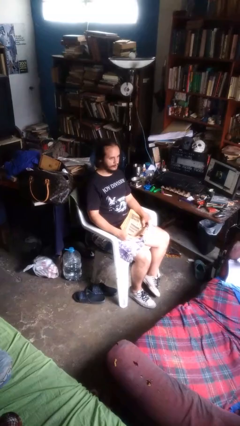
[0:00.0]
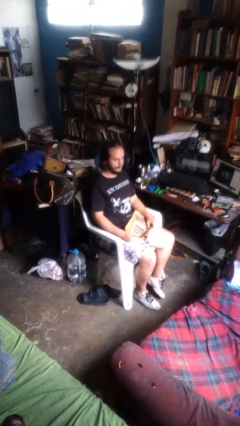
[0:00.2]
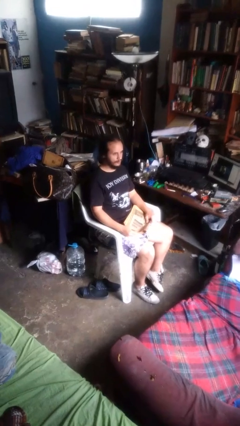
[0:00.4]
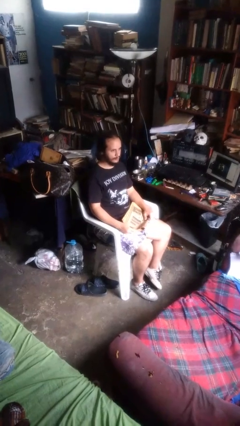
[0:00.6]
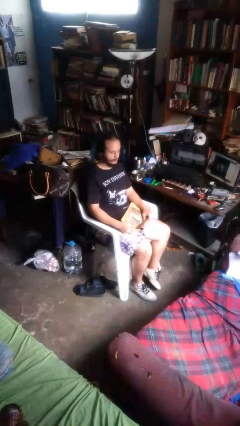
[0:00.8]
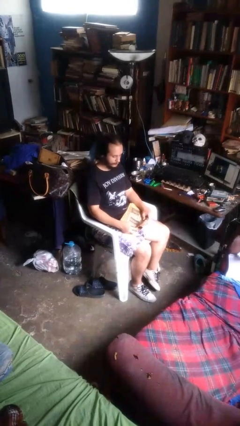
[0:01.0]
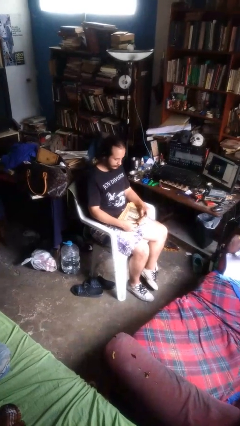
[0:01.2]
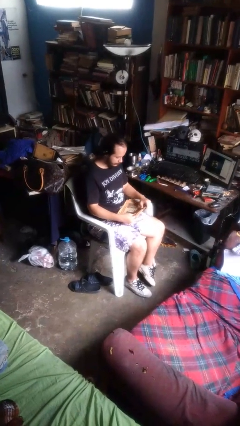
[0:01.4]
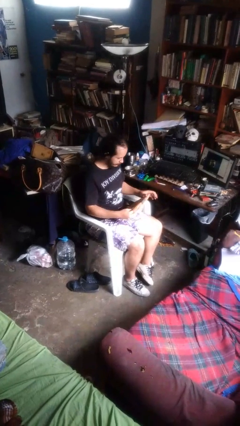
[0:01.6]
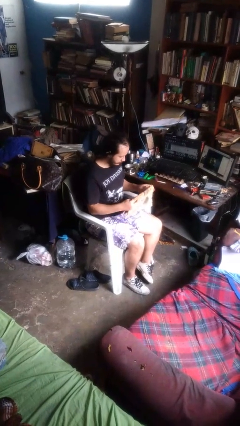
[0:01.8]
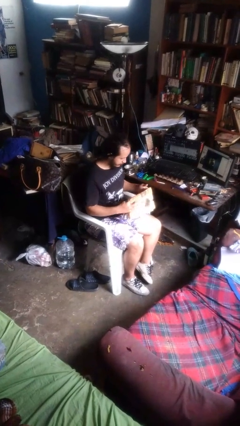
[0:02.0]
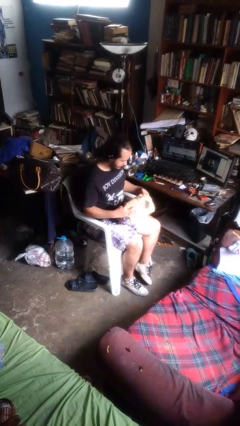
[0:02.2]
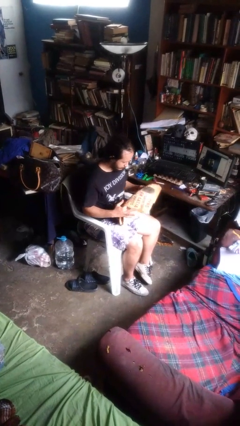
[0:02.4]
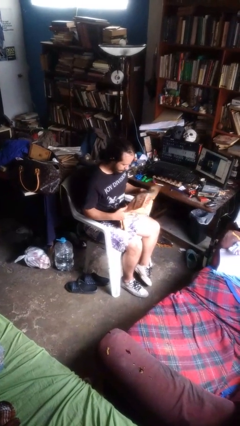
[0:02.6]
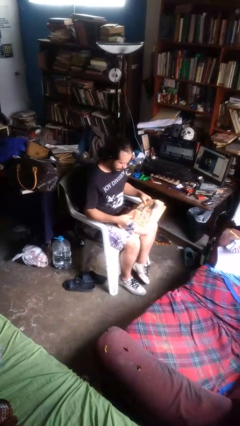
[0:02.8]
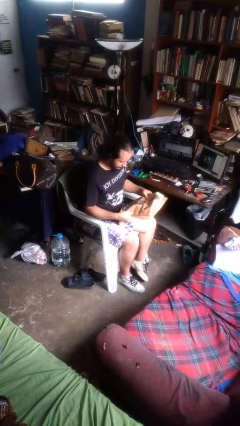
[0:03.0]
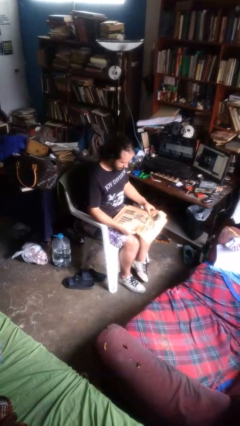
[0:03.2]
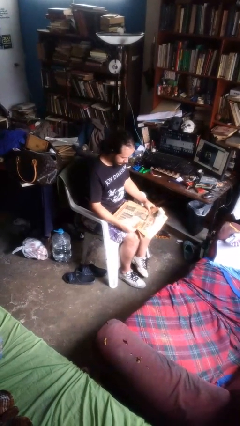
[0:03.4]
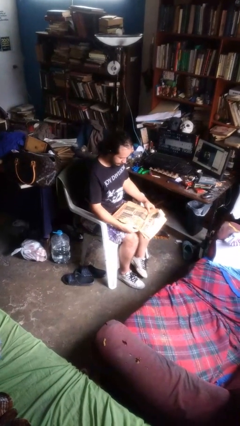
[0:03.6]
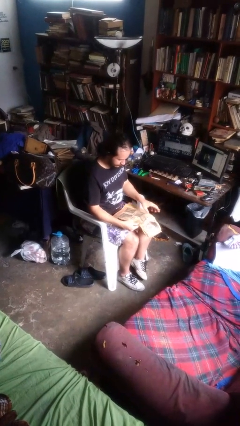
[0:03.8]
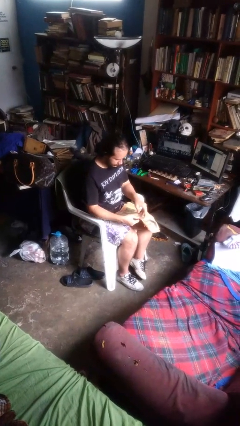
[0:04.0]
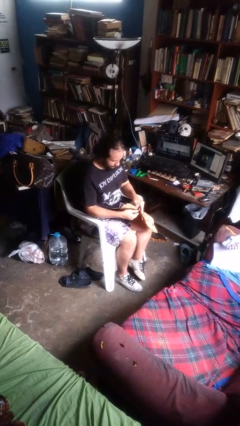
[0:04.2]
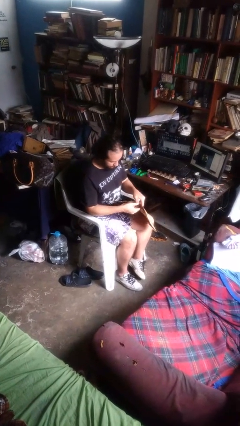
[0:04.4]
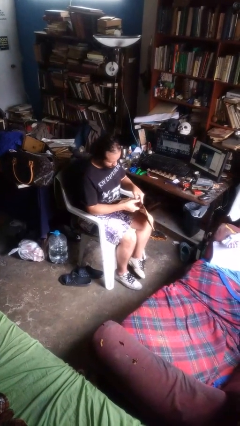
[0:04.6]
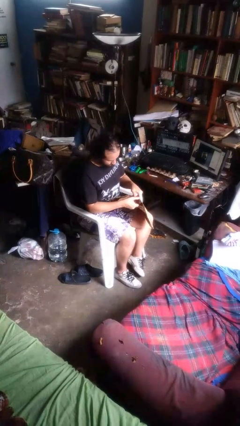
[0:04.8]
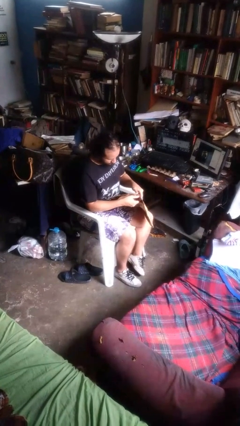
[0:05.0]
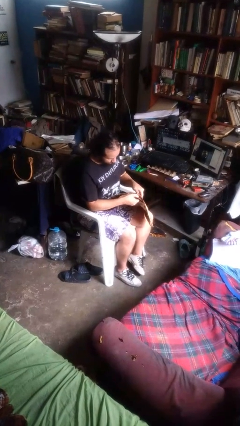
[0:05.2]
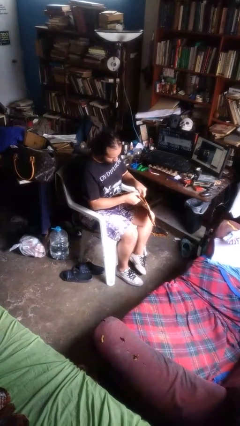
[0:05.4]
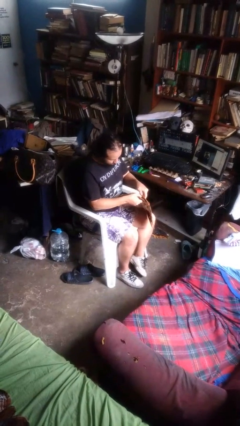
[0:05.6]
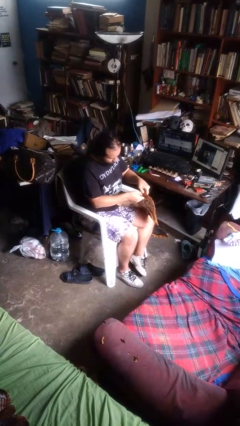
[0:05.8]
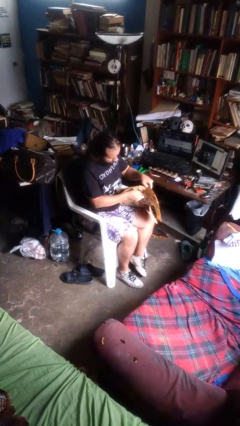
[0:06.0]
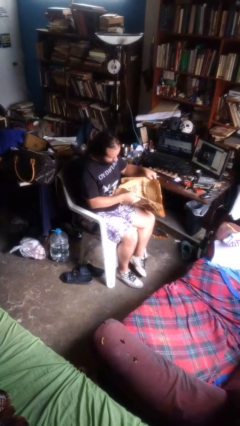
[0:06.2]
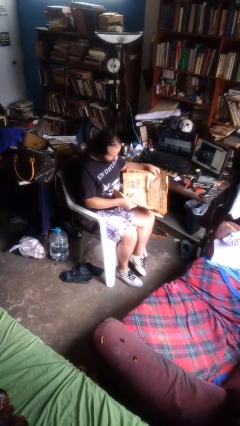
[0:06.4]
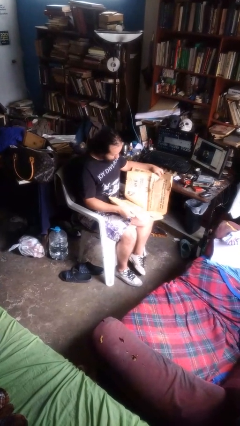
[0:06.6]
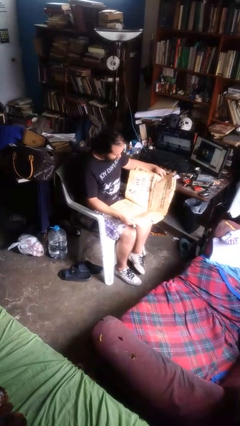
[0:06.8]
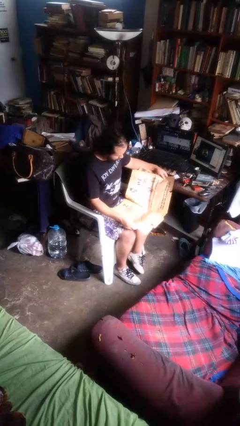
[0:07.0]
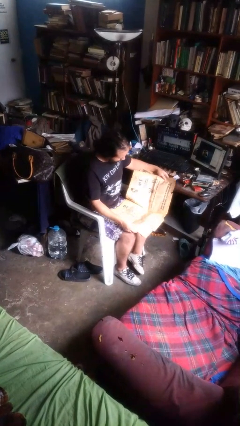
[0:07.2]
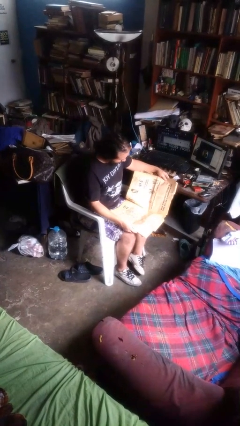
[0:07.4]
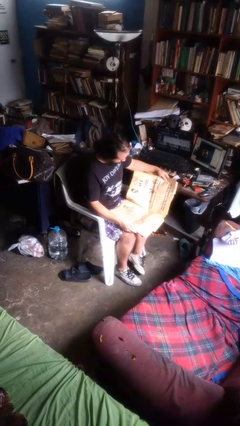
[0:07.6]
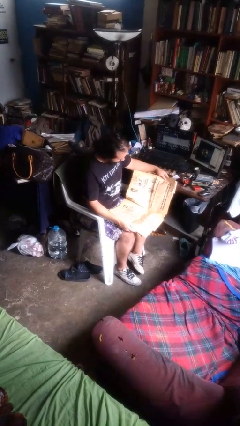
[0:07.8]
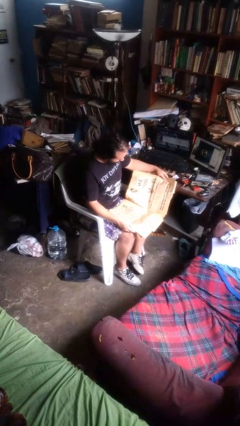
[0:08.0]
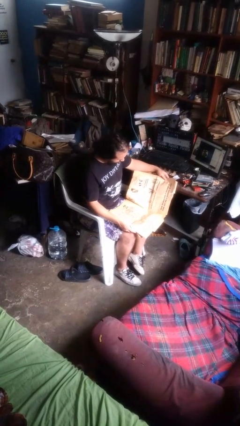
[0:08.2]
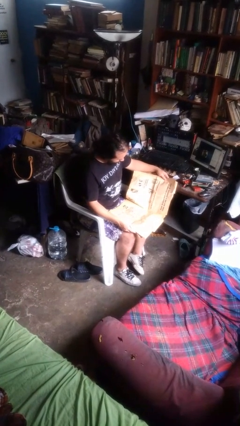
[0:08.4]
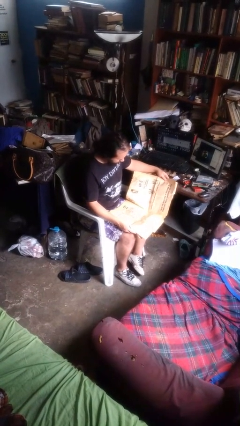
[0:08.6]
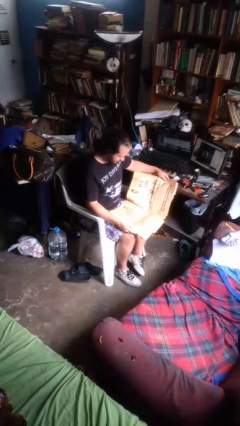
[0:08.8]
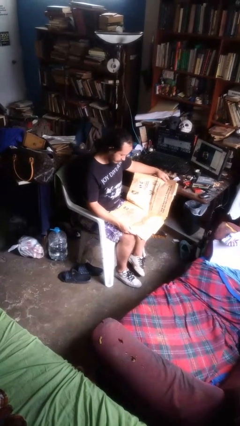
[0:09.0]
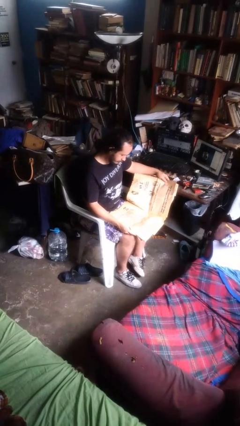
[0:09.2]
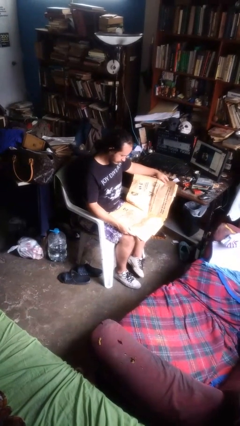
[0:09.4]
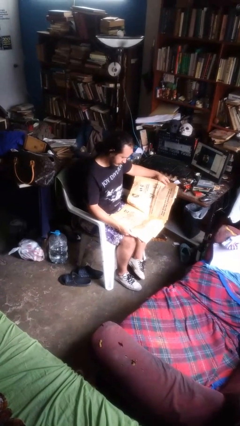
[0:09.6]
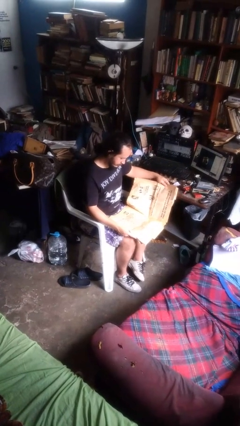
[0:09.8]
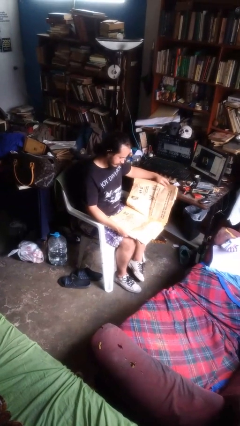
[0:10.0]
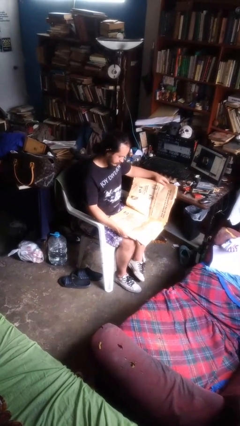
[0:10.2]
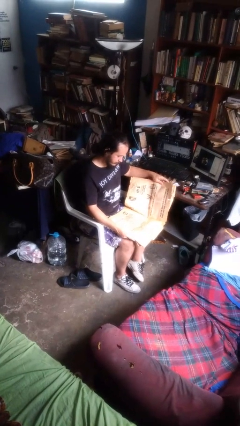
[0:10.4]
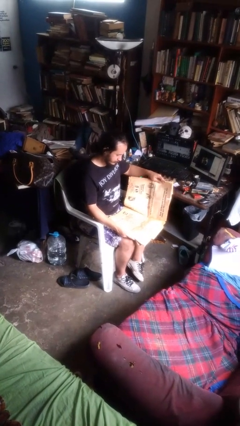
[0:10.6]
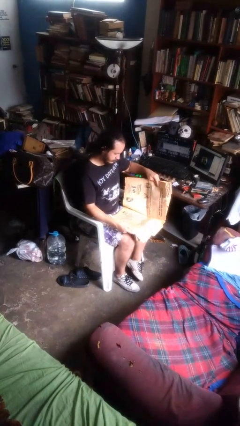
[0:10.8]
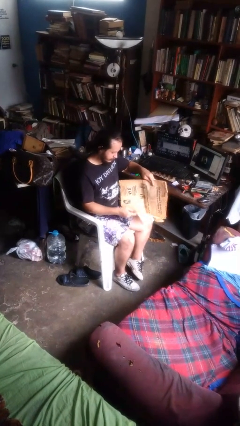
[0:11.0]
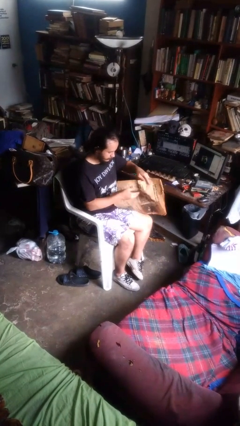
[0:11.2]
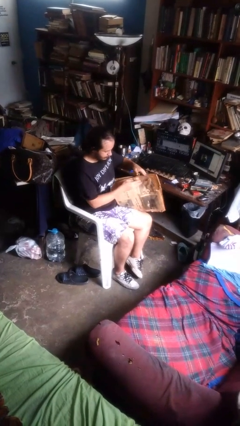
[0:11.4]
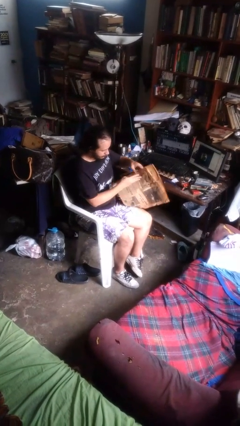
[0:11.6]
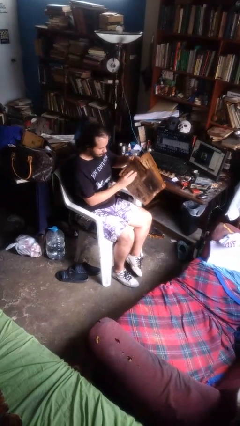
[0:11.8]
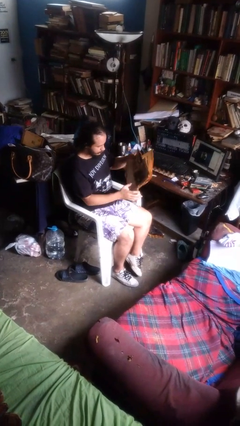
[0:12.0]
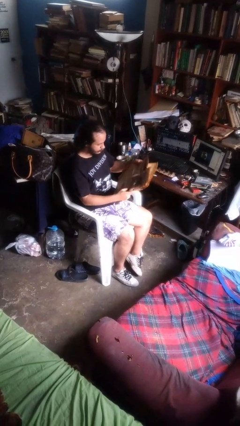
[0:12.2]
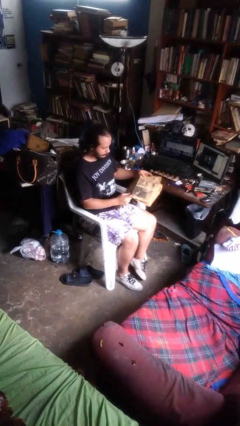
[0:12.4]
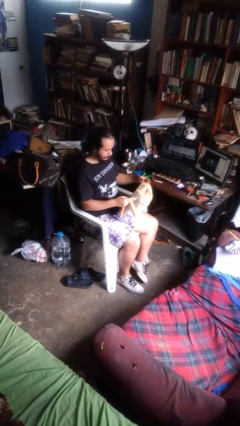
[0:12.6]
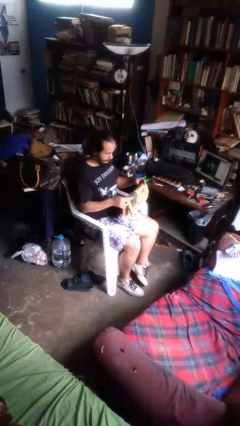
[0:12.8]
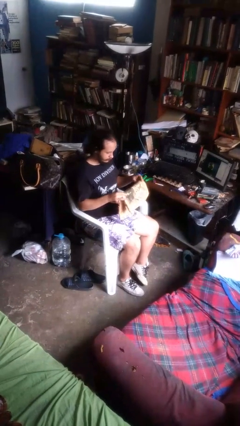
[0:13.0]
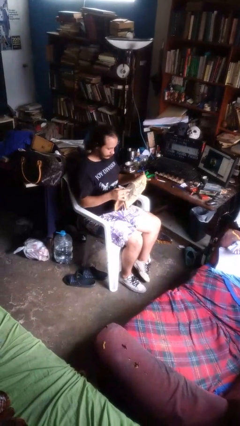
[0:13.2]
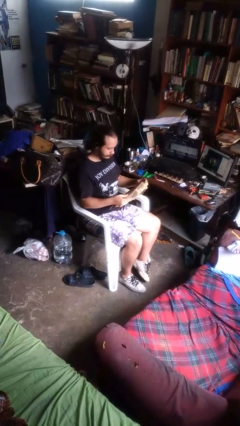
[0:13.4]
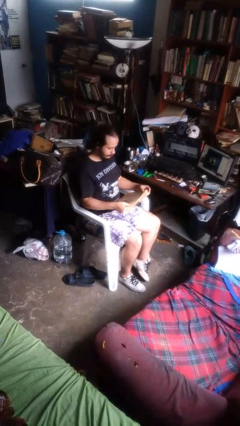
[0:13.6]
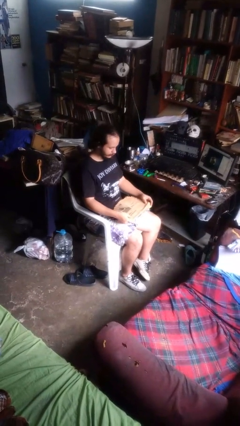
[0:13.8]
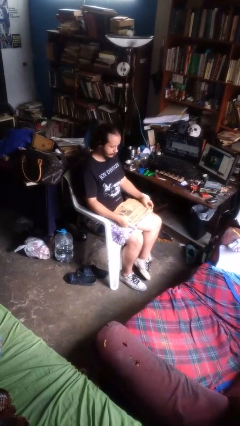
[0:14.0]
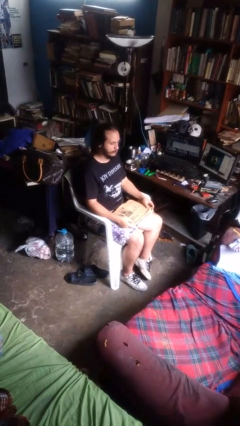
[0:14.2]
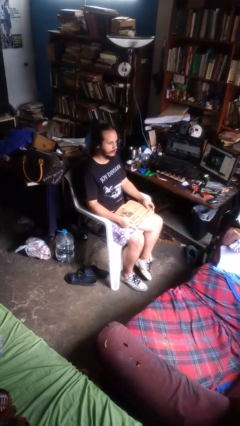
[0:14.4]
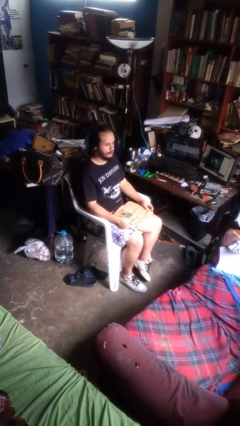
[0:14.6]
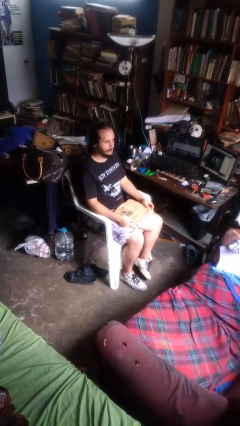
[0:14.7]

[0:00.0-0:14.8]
person reads newspaper

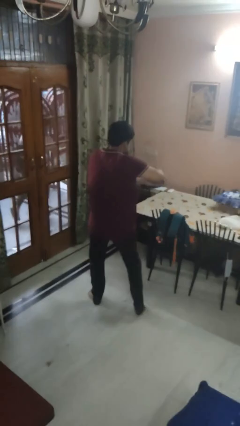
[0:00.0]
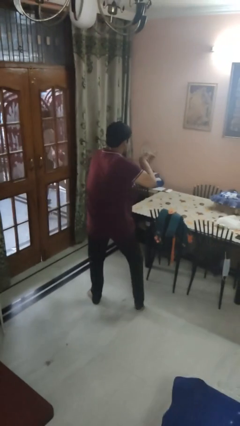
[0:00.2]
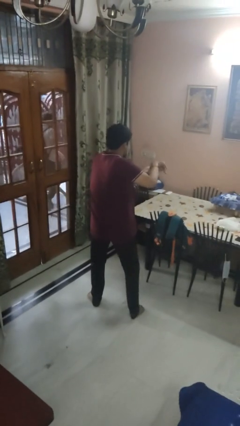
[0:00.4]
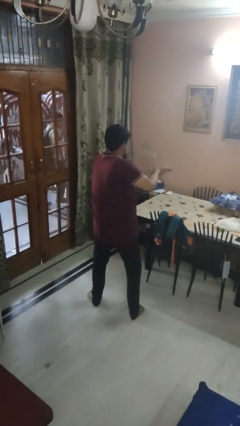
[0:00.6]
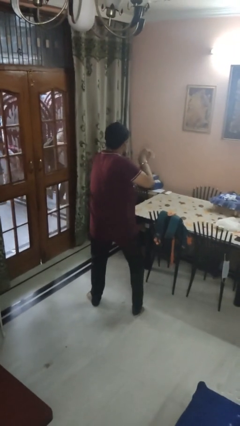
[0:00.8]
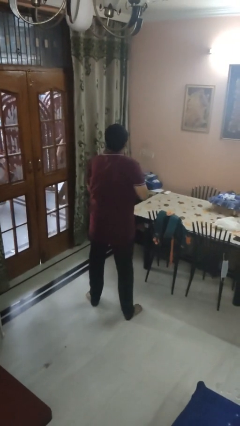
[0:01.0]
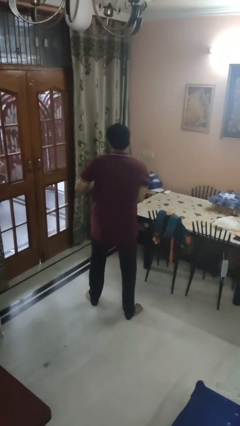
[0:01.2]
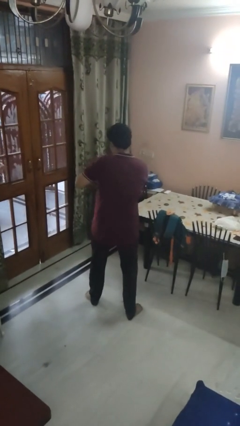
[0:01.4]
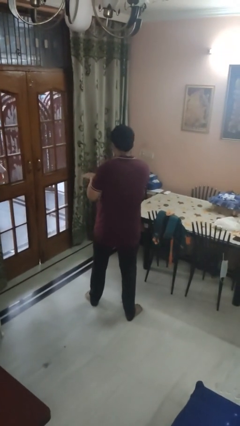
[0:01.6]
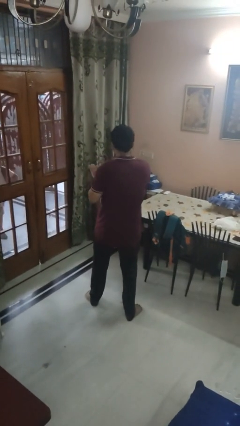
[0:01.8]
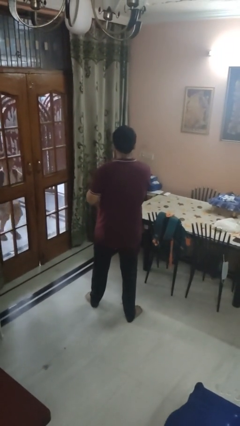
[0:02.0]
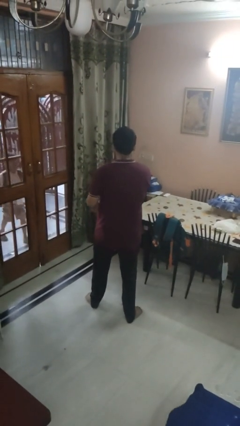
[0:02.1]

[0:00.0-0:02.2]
person dances in place

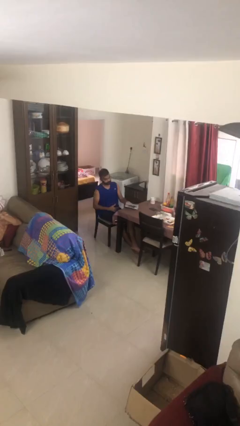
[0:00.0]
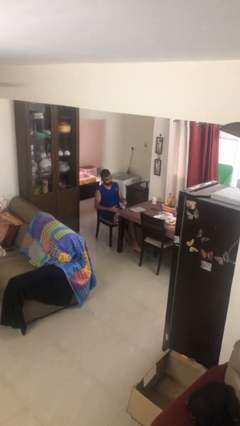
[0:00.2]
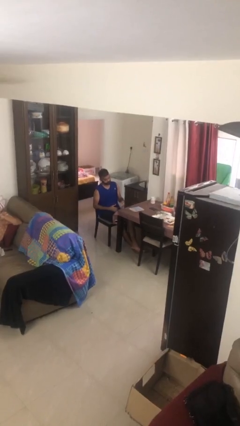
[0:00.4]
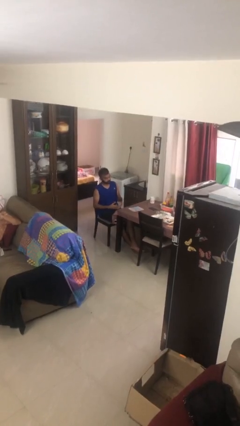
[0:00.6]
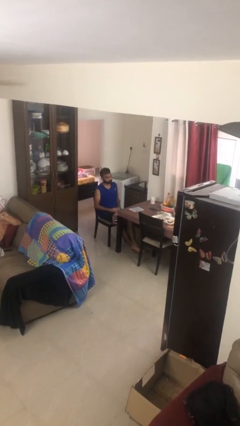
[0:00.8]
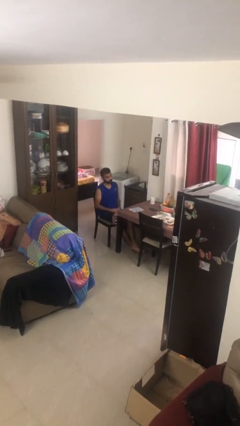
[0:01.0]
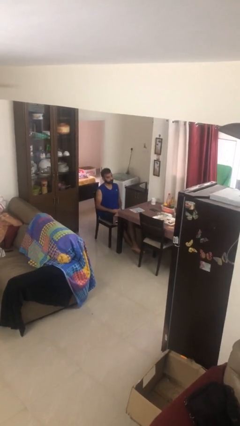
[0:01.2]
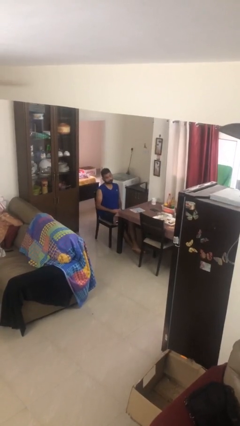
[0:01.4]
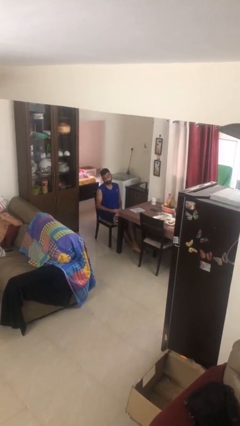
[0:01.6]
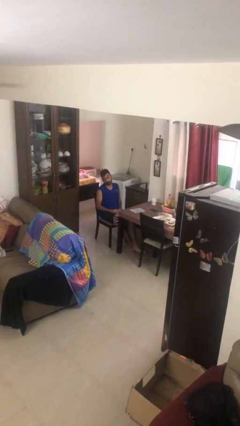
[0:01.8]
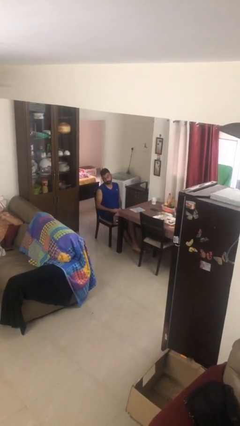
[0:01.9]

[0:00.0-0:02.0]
person puts down object on table
